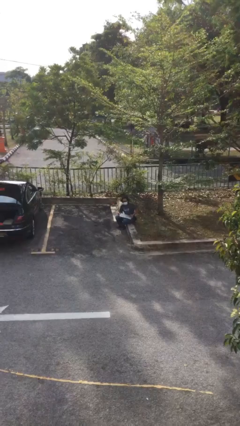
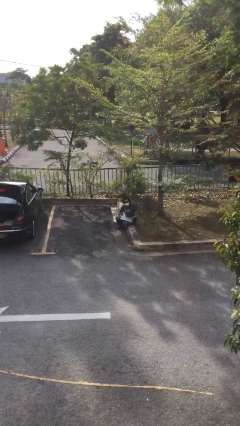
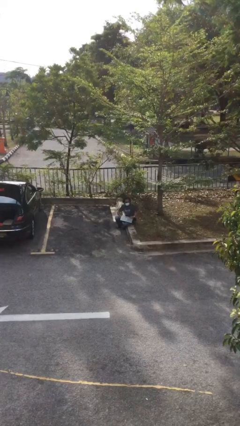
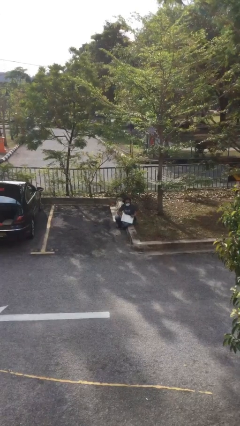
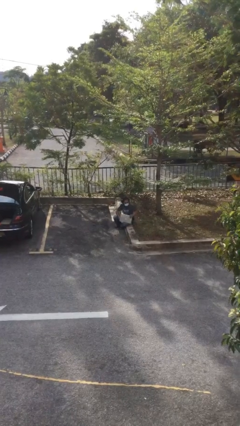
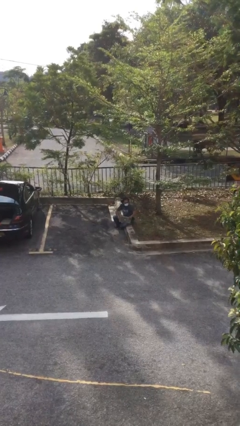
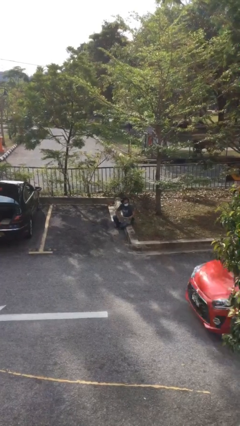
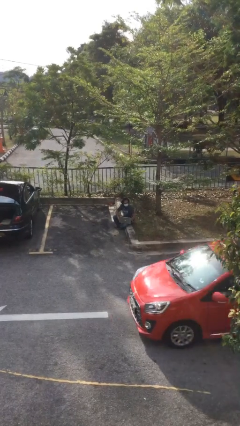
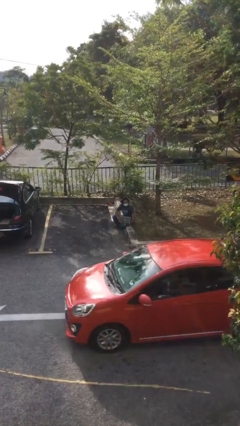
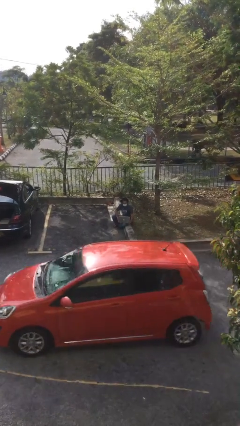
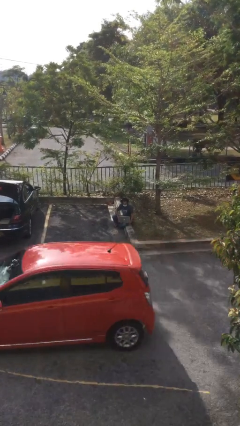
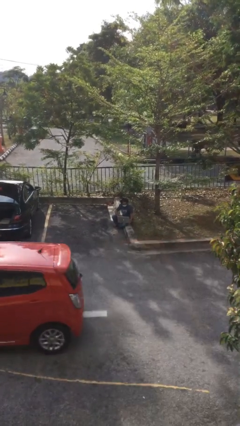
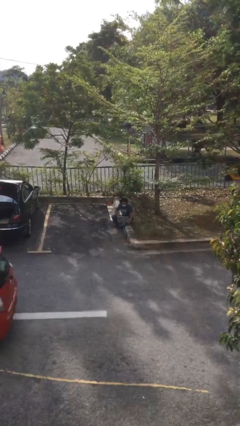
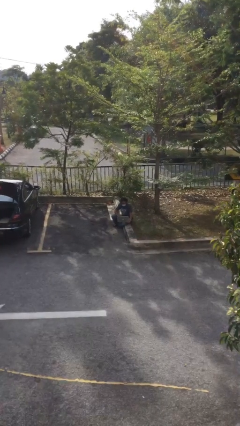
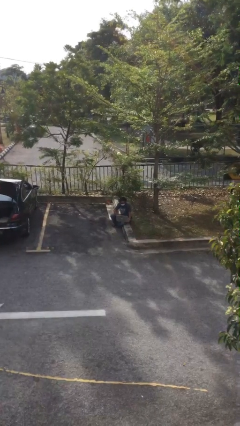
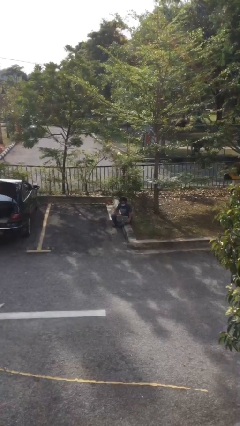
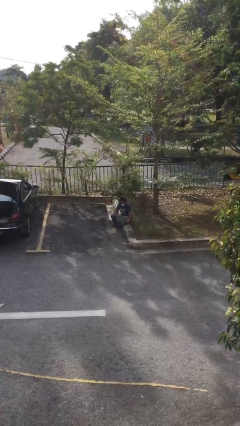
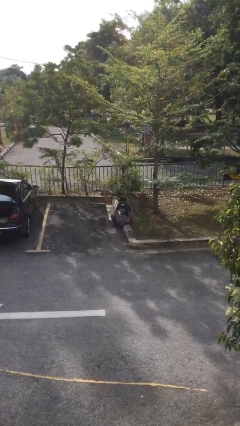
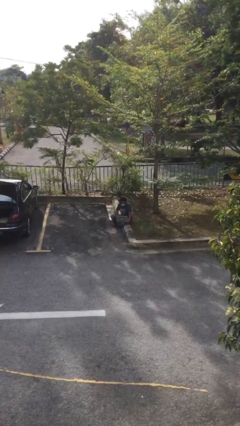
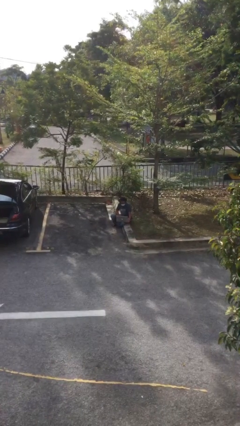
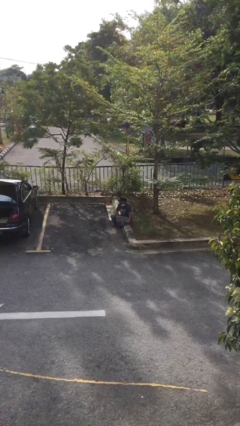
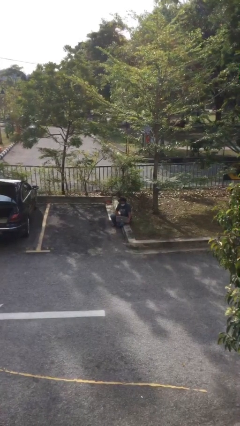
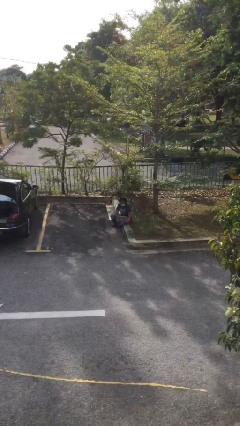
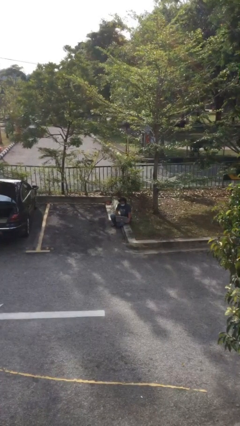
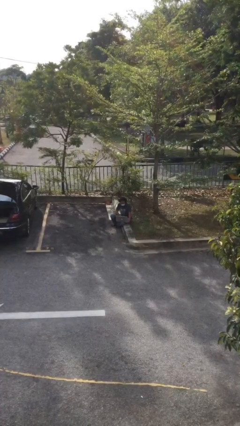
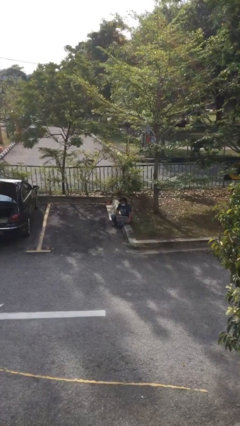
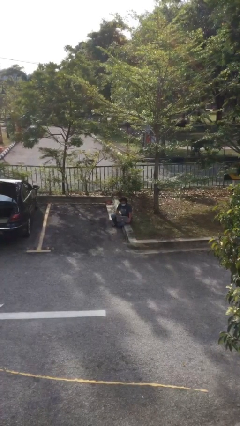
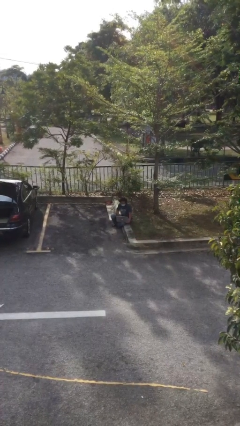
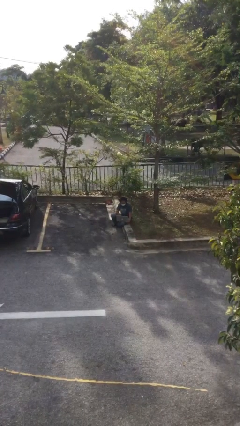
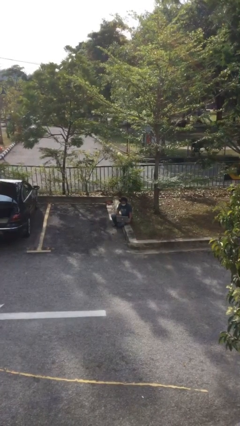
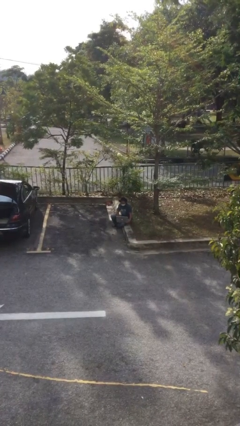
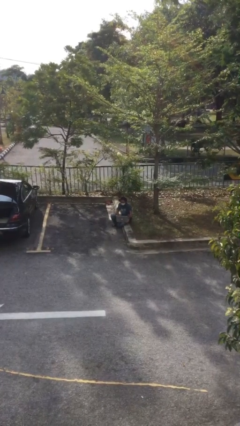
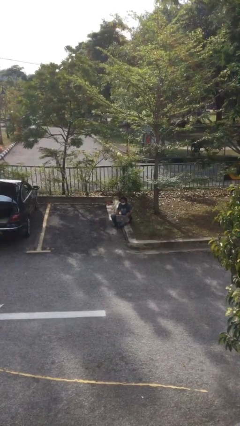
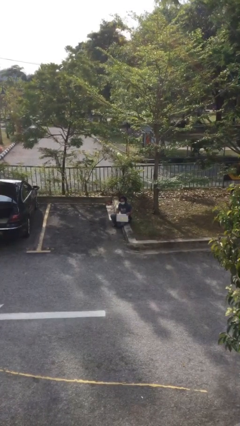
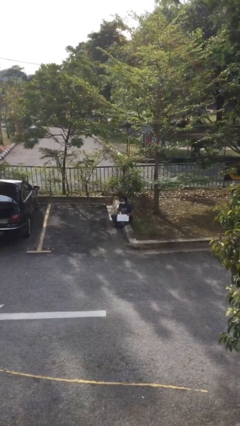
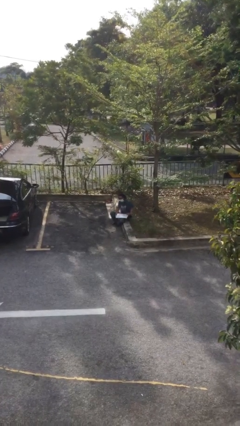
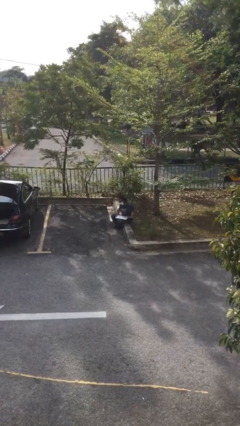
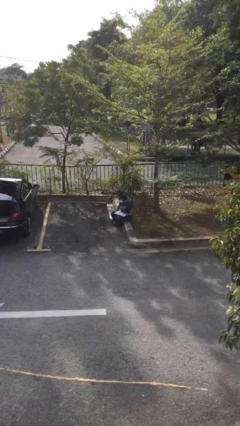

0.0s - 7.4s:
person interacts with laptop

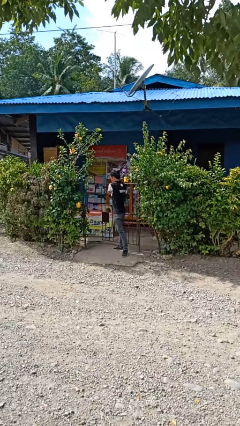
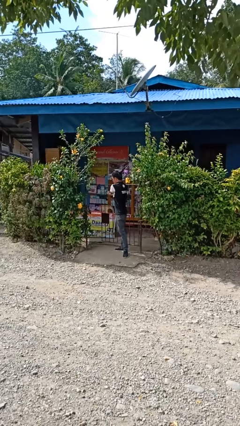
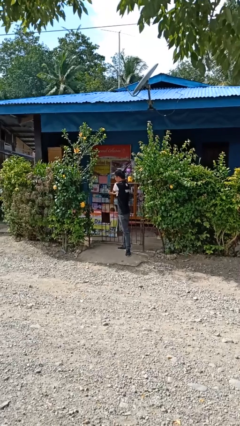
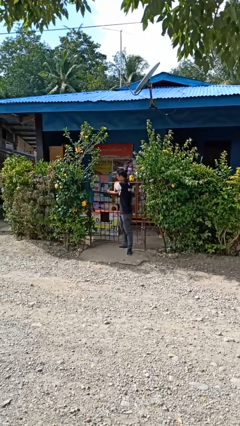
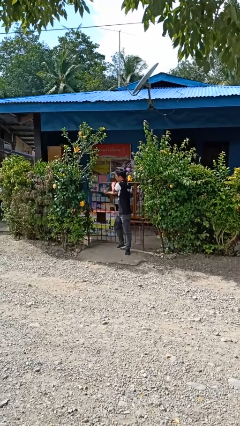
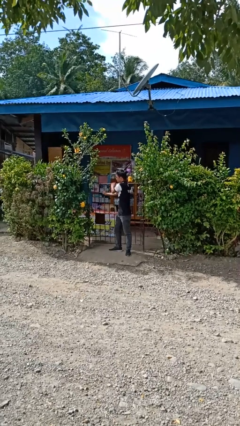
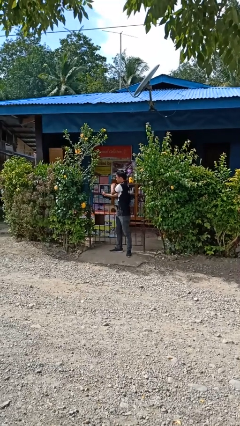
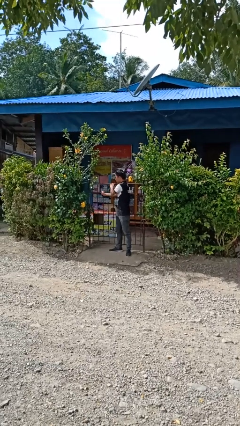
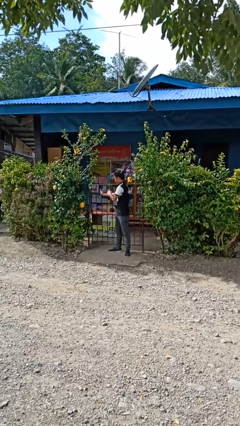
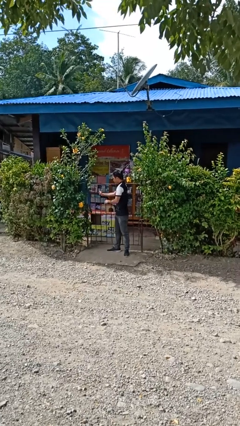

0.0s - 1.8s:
person closes gate

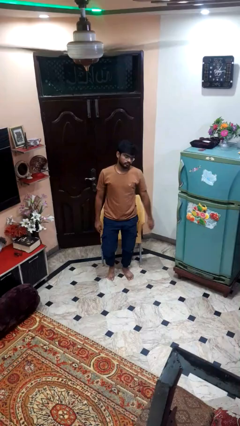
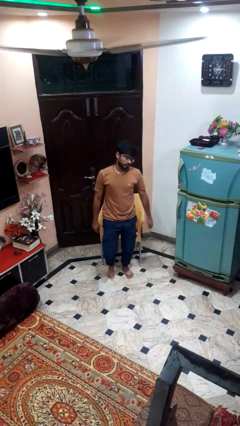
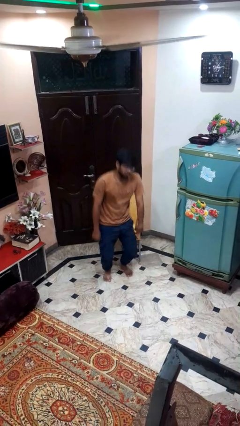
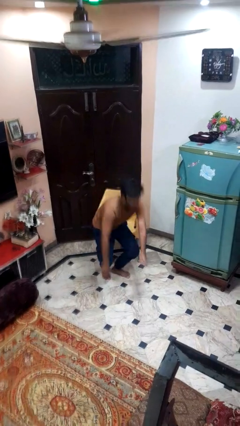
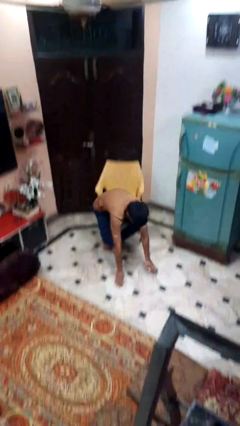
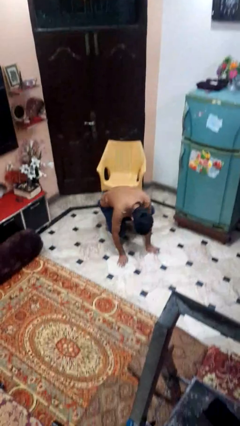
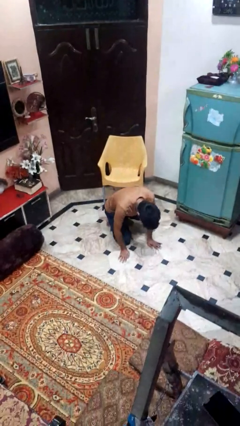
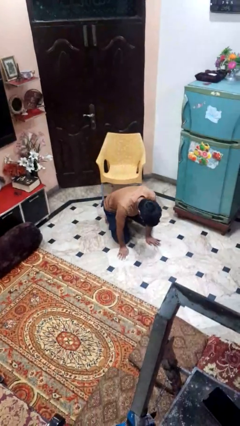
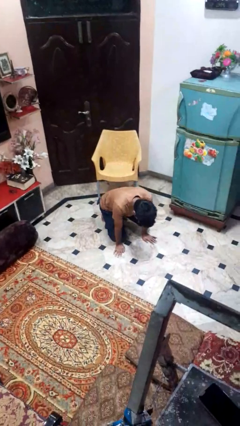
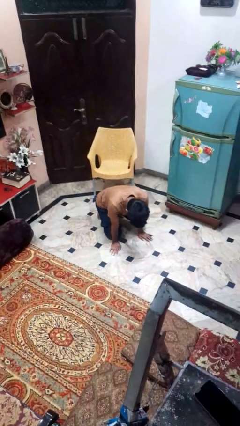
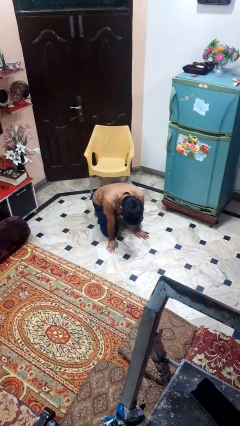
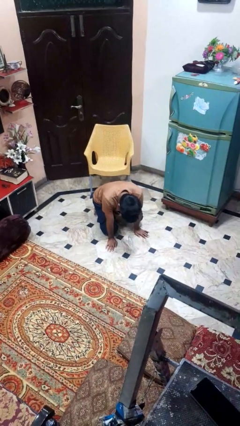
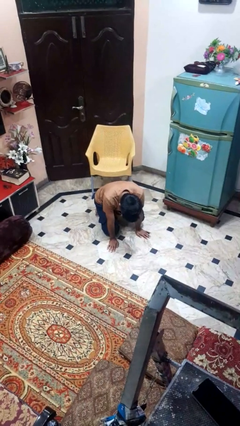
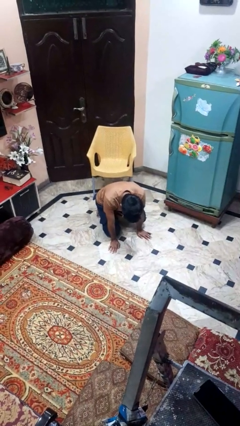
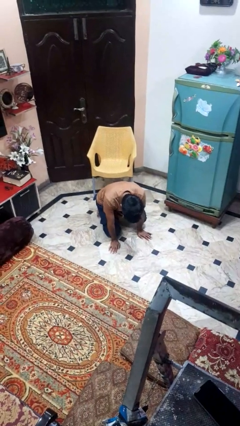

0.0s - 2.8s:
person falls from chair

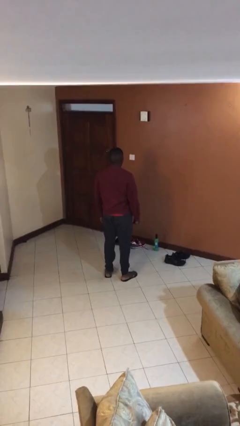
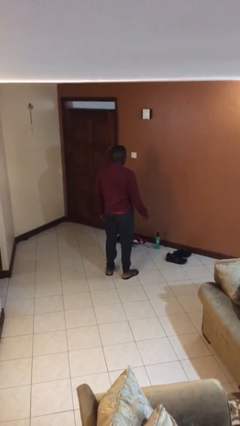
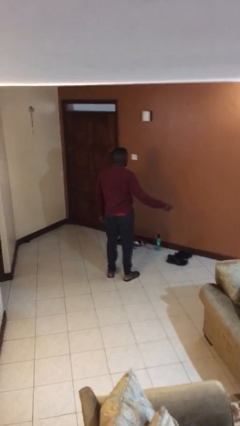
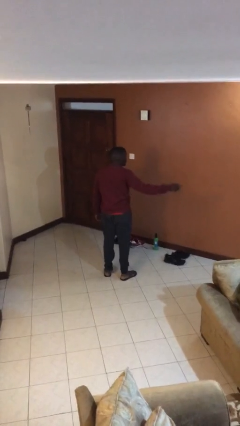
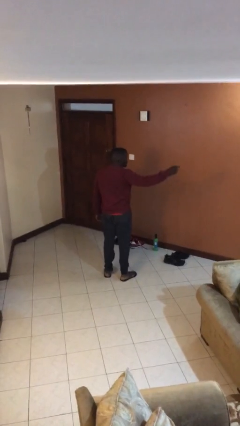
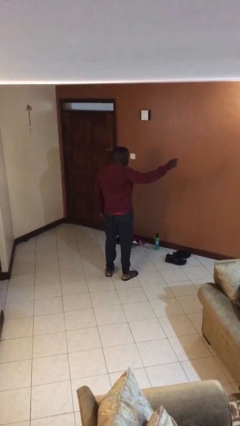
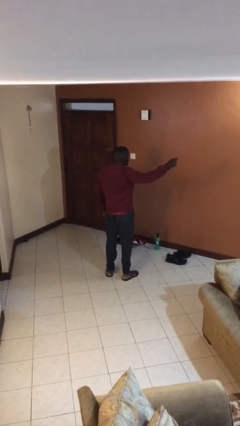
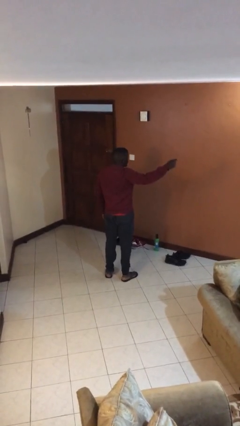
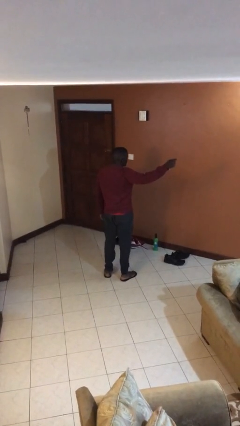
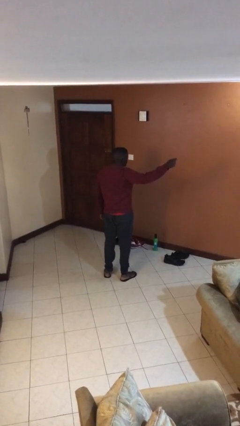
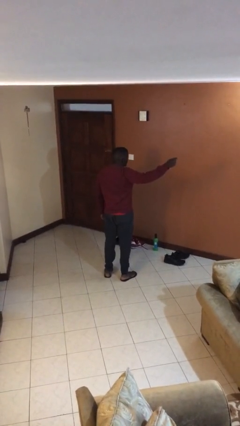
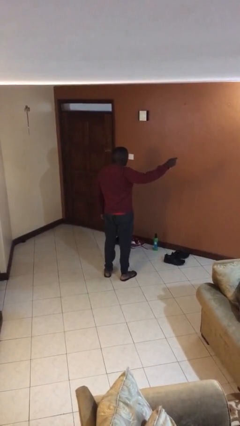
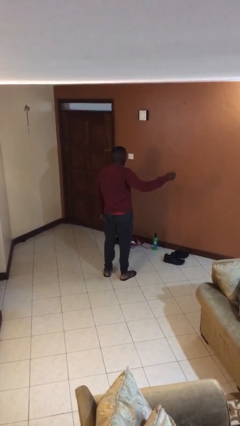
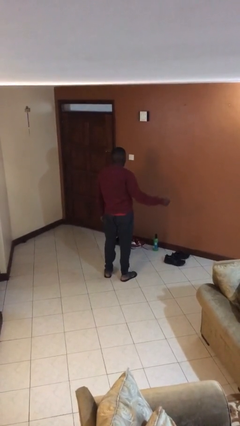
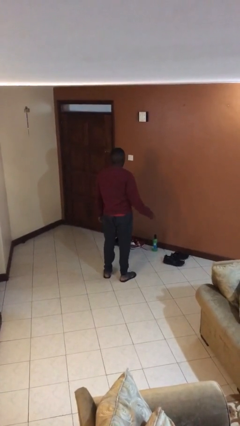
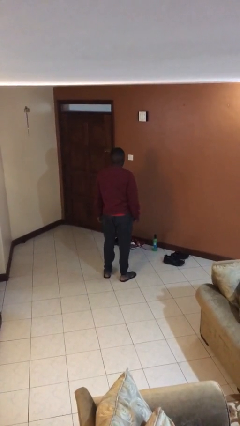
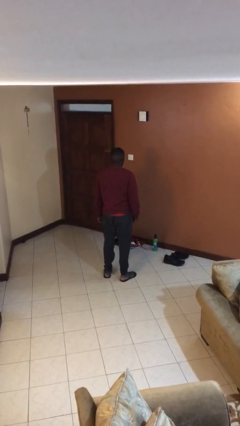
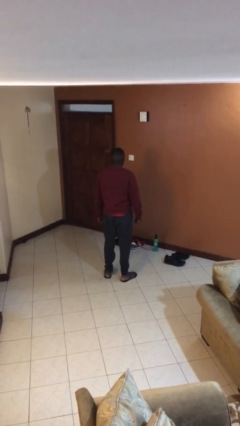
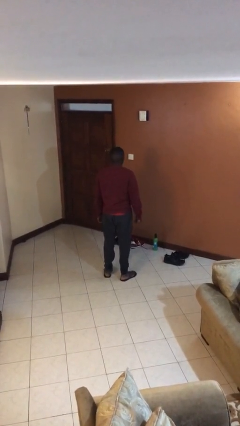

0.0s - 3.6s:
person points at person

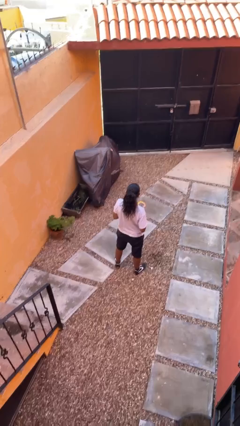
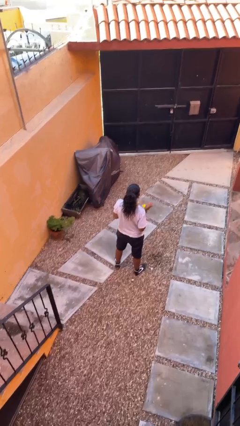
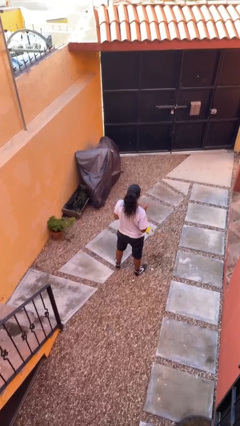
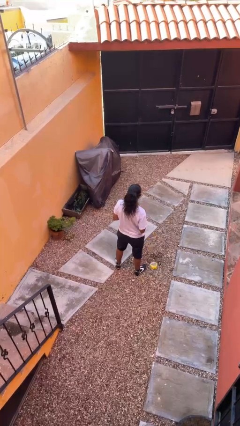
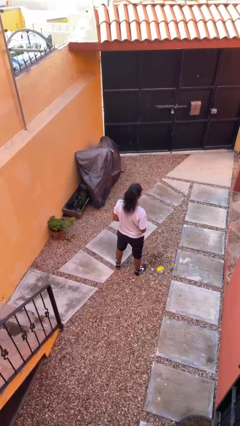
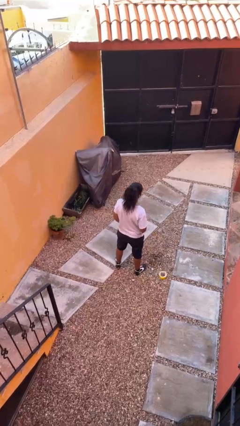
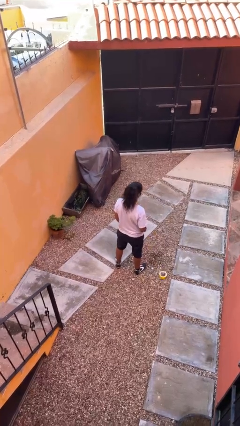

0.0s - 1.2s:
person drops object

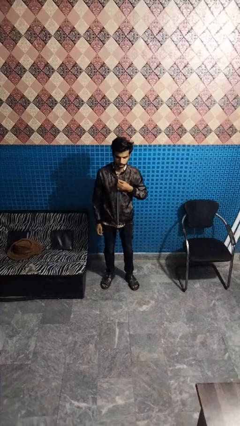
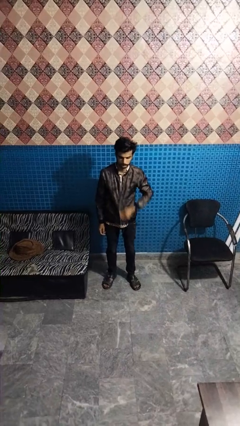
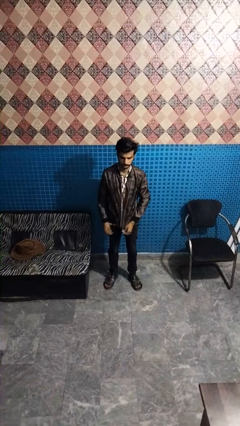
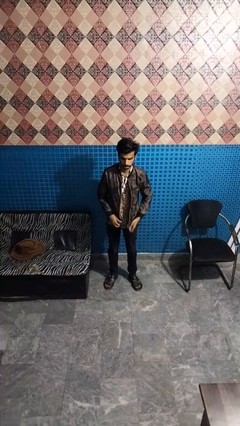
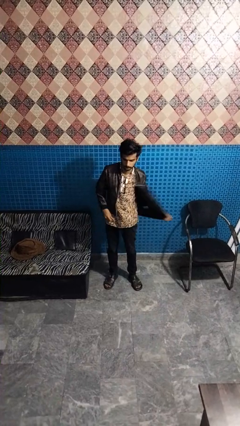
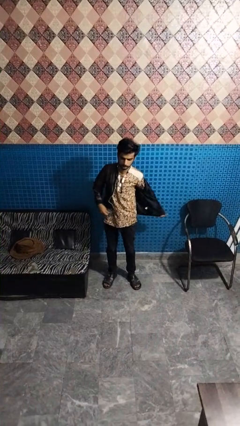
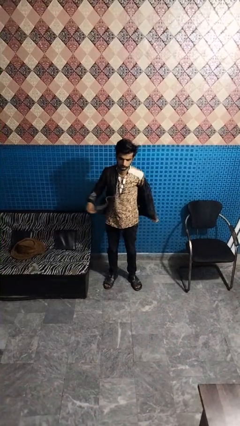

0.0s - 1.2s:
person unzips jacket
